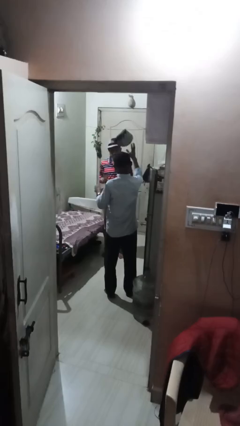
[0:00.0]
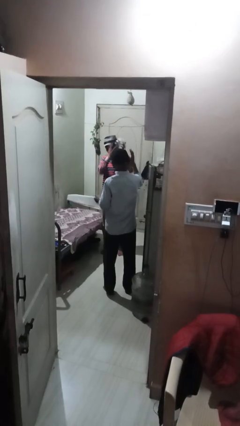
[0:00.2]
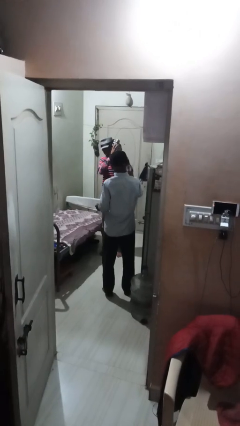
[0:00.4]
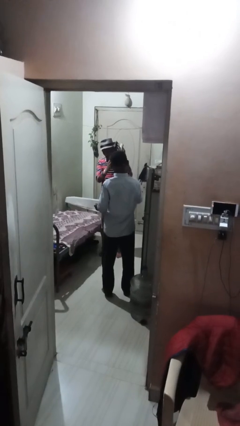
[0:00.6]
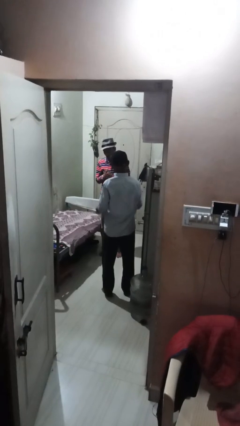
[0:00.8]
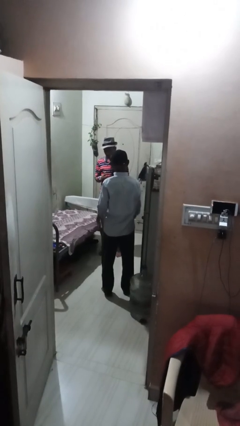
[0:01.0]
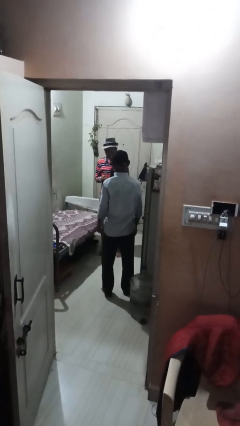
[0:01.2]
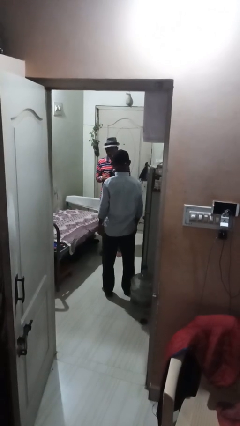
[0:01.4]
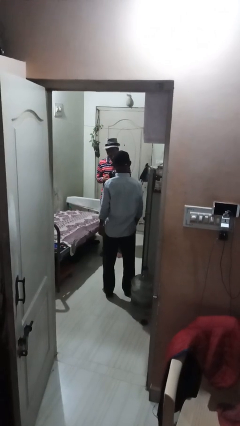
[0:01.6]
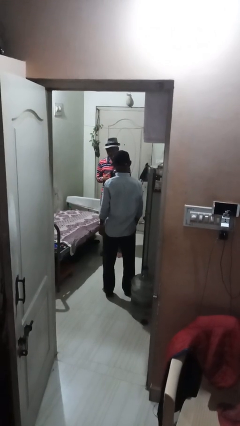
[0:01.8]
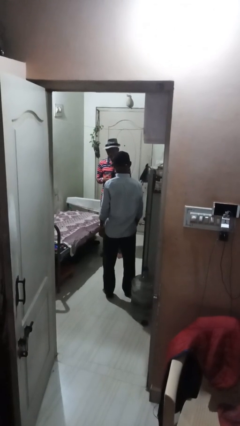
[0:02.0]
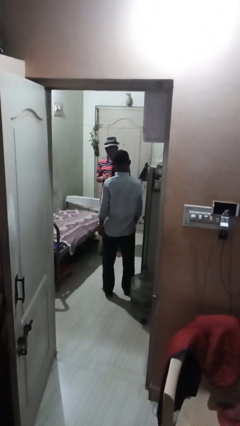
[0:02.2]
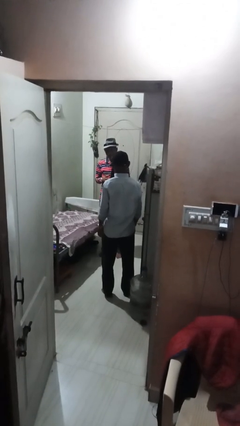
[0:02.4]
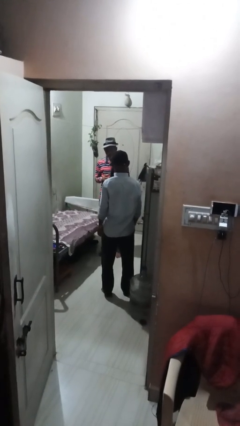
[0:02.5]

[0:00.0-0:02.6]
person throws object to person

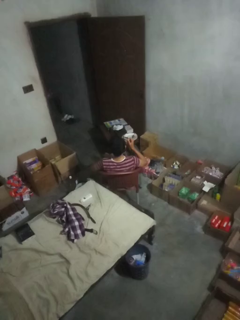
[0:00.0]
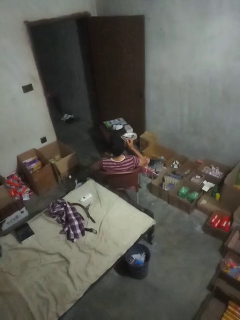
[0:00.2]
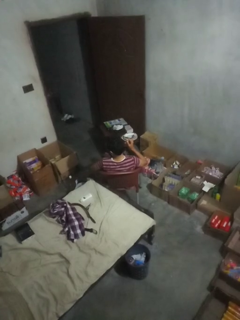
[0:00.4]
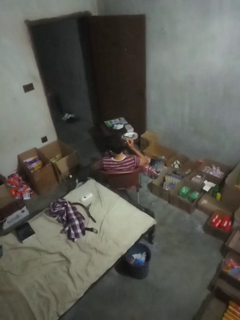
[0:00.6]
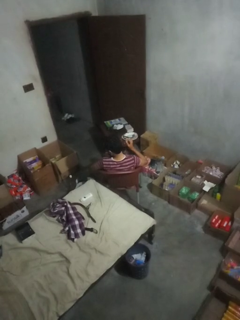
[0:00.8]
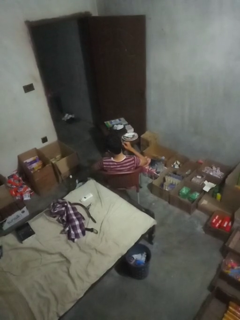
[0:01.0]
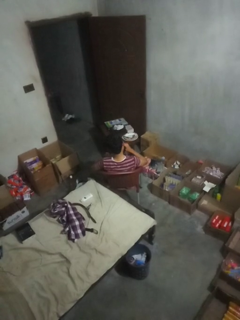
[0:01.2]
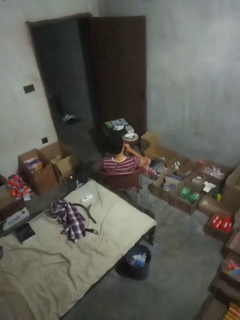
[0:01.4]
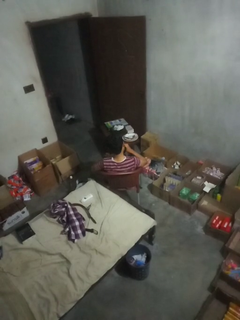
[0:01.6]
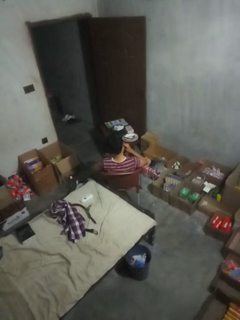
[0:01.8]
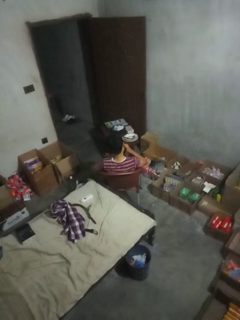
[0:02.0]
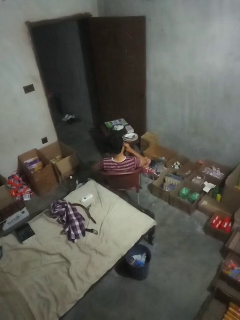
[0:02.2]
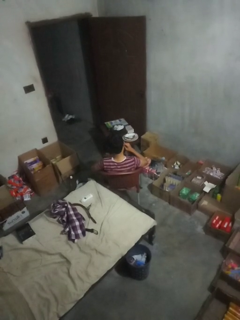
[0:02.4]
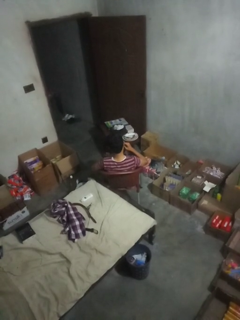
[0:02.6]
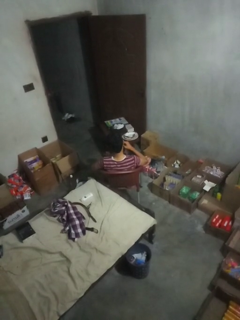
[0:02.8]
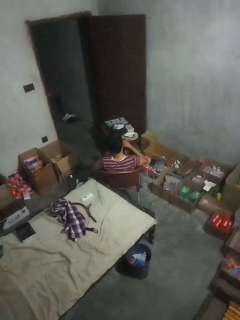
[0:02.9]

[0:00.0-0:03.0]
person flosses

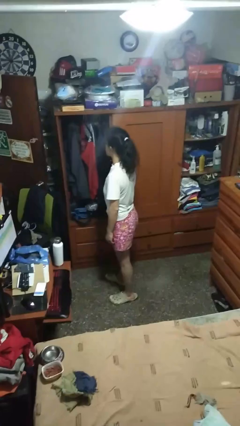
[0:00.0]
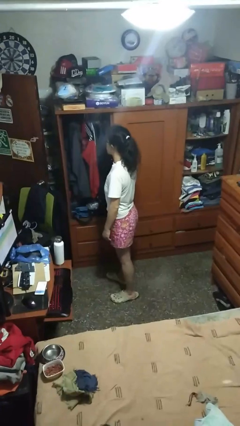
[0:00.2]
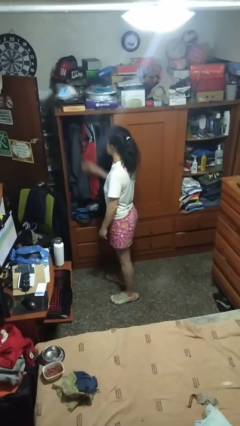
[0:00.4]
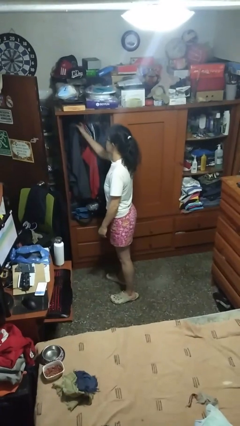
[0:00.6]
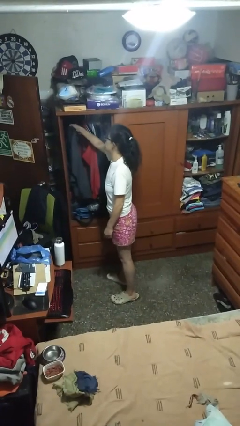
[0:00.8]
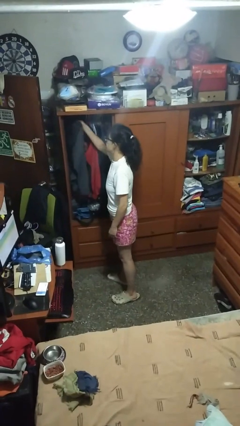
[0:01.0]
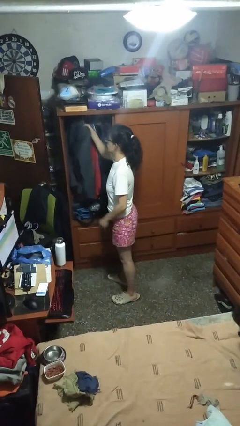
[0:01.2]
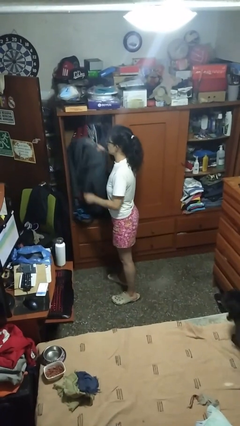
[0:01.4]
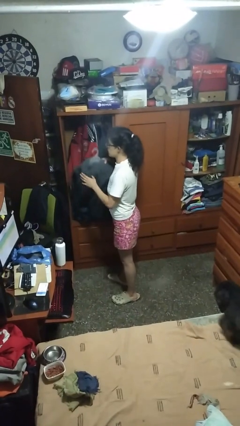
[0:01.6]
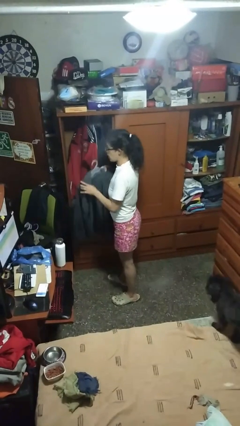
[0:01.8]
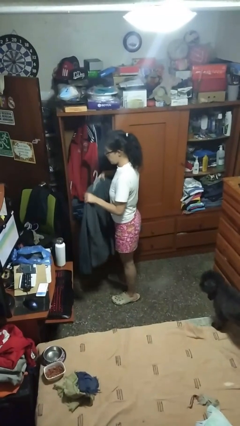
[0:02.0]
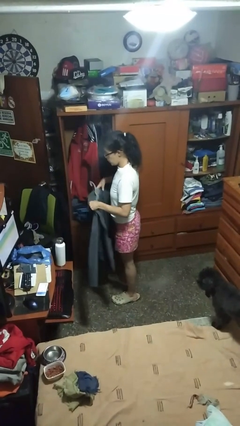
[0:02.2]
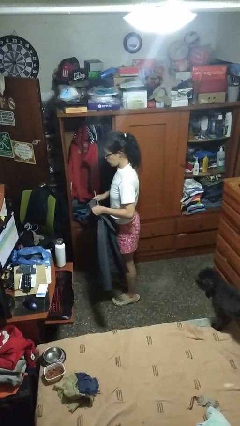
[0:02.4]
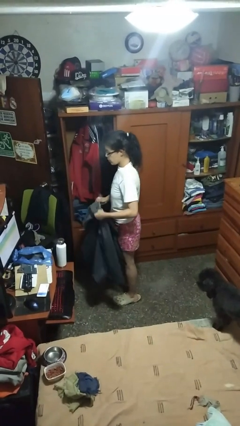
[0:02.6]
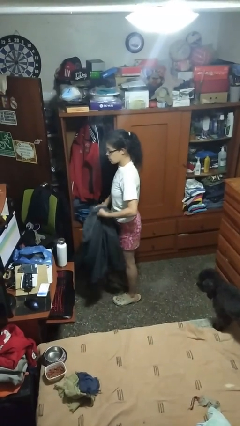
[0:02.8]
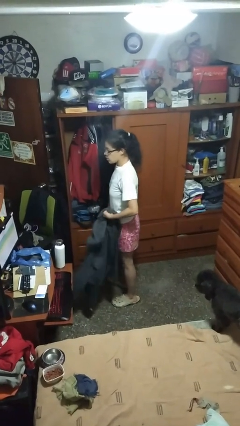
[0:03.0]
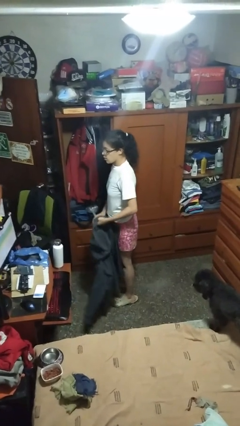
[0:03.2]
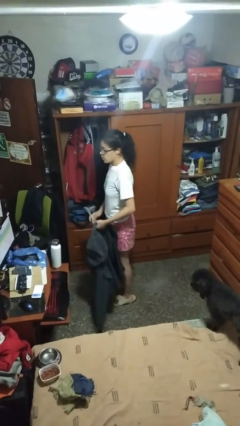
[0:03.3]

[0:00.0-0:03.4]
person takes clothes from closet

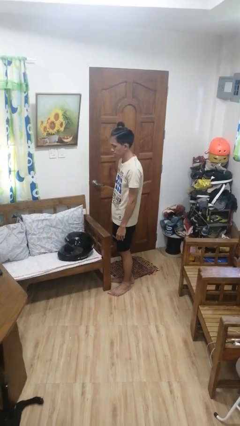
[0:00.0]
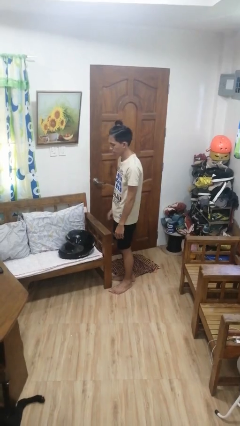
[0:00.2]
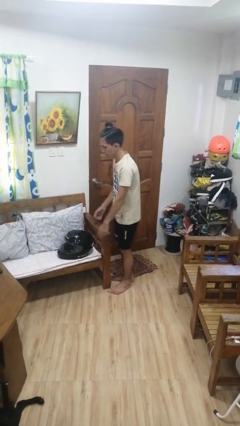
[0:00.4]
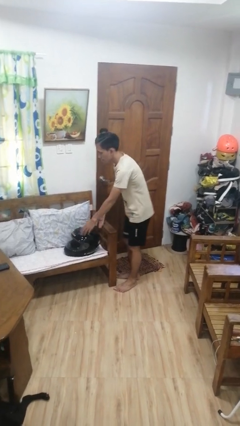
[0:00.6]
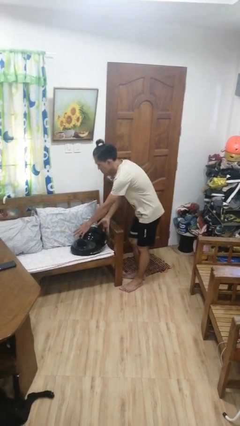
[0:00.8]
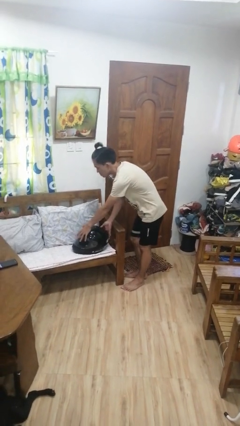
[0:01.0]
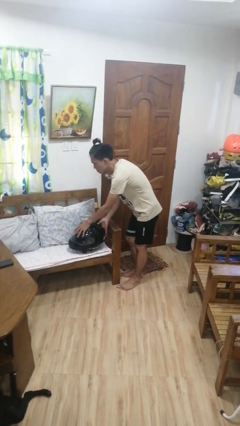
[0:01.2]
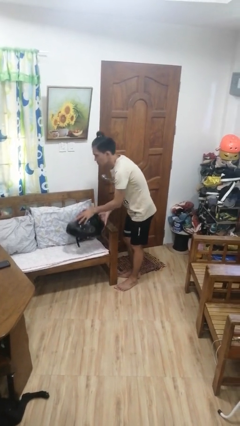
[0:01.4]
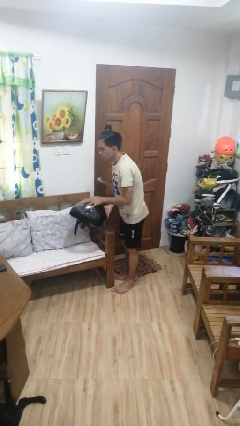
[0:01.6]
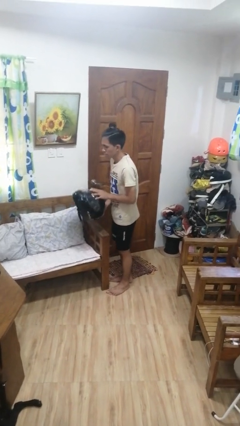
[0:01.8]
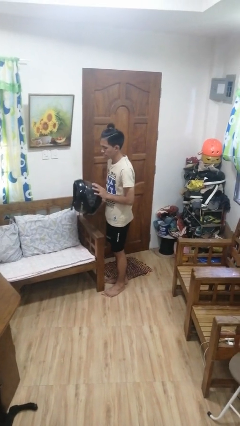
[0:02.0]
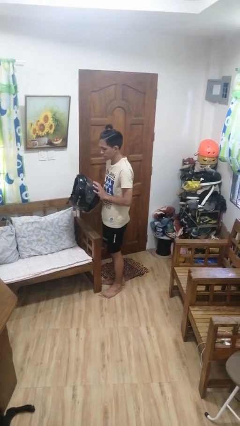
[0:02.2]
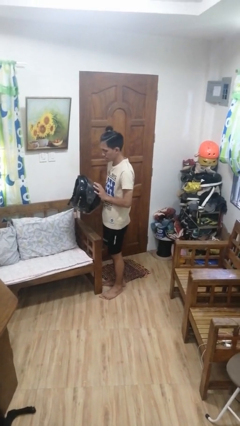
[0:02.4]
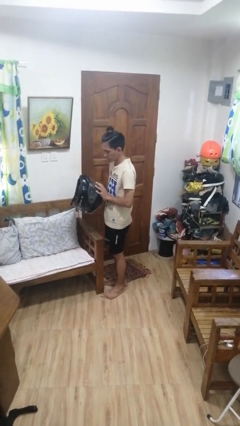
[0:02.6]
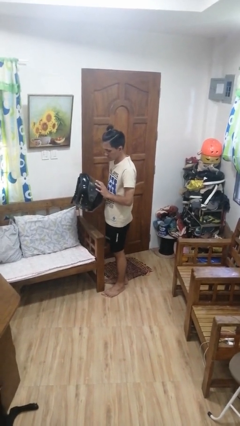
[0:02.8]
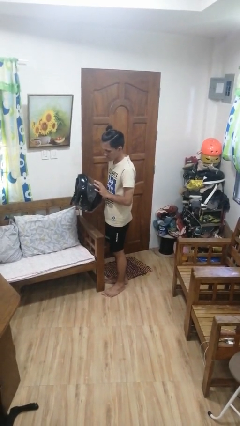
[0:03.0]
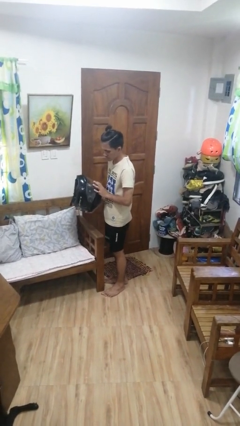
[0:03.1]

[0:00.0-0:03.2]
person picks up object from couch

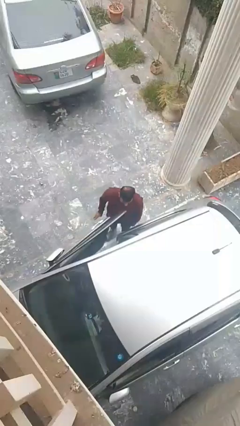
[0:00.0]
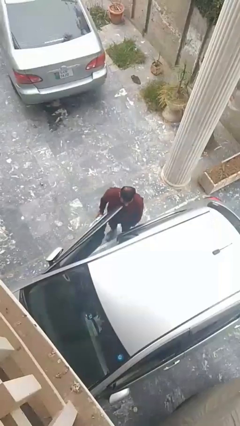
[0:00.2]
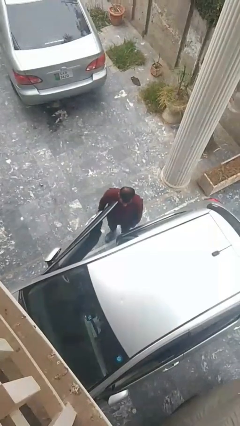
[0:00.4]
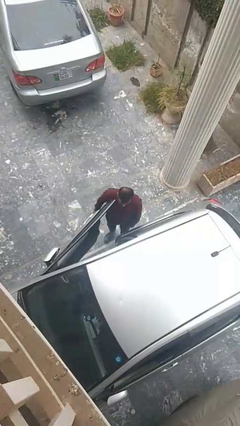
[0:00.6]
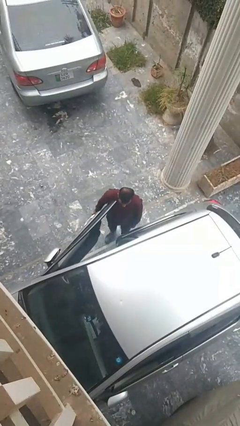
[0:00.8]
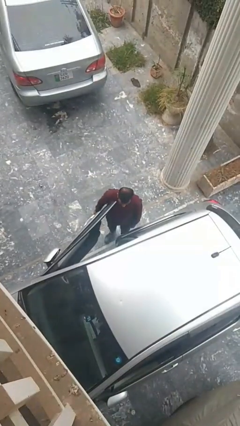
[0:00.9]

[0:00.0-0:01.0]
person opens car door

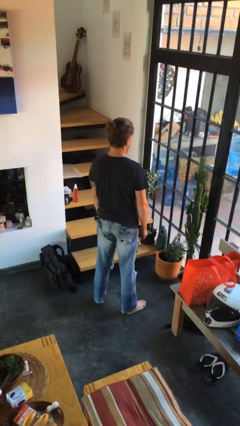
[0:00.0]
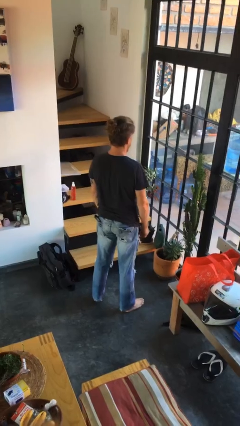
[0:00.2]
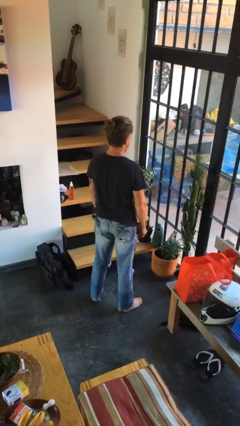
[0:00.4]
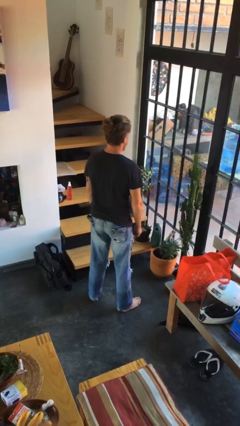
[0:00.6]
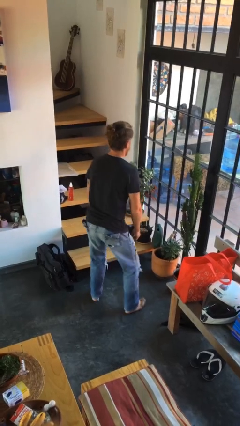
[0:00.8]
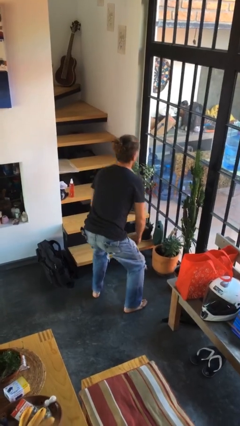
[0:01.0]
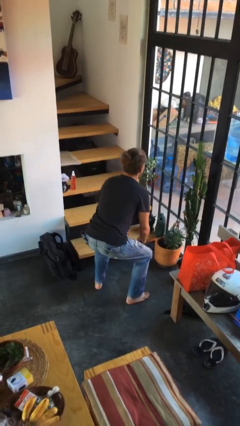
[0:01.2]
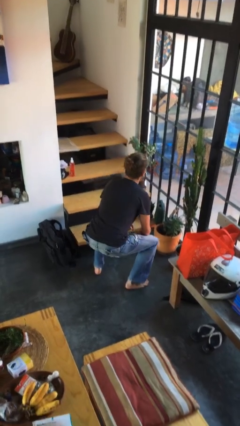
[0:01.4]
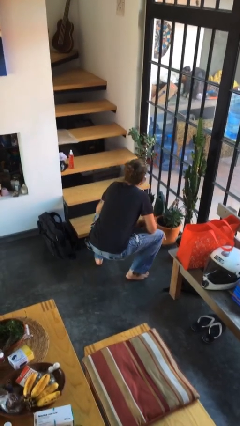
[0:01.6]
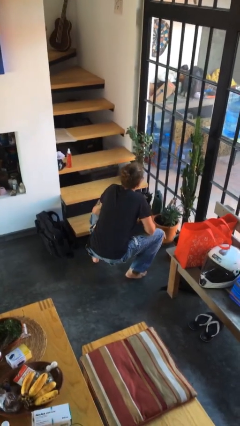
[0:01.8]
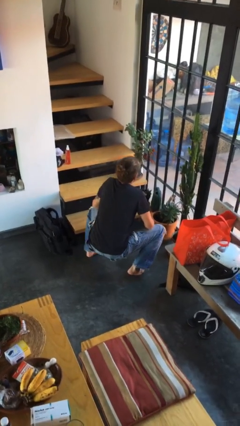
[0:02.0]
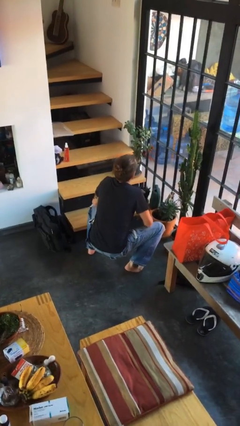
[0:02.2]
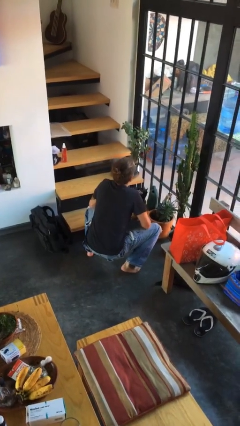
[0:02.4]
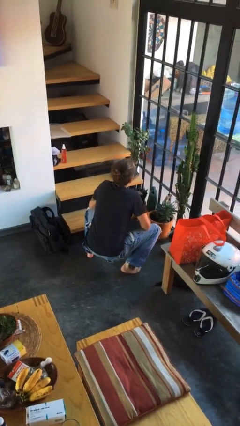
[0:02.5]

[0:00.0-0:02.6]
person squats

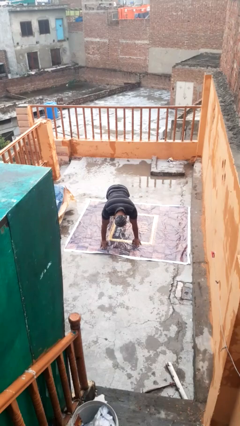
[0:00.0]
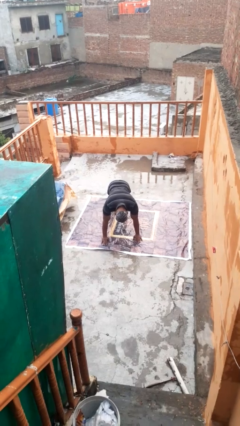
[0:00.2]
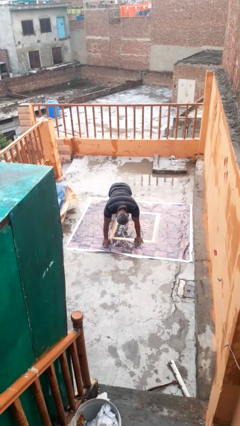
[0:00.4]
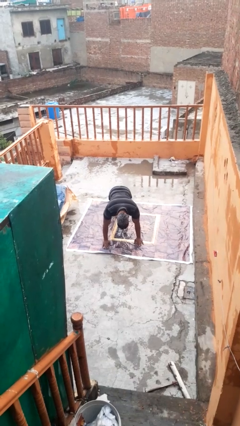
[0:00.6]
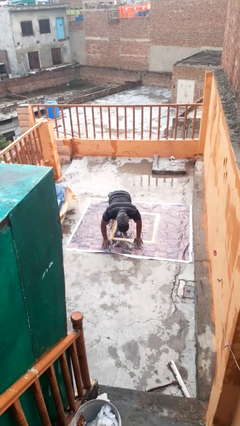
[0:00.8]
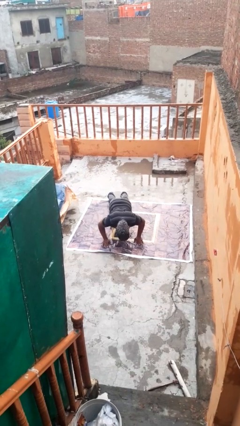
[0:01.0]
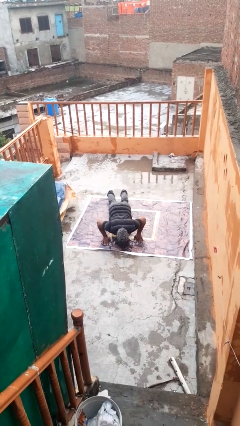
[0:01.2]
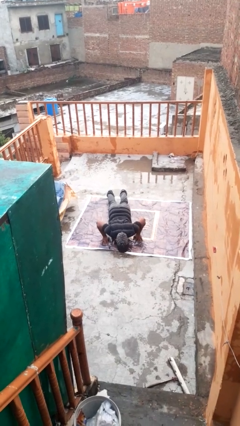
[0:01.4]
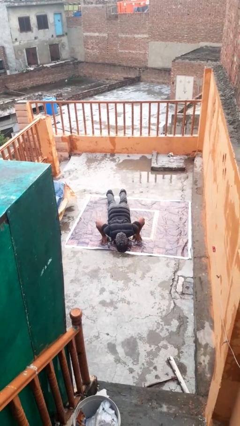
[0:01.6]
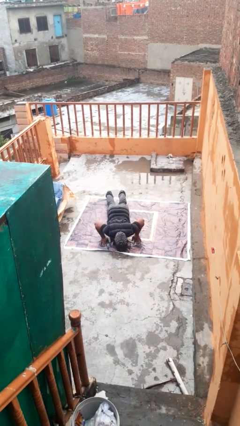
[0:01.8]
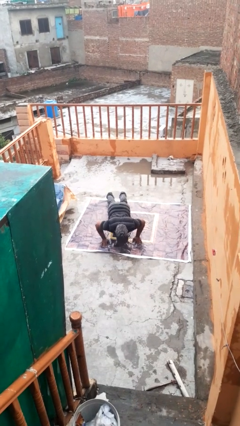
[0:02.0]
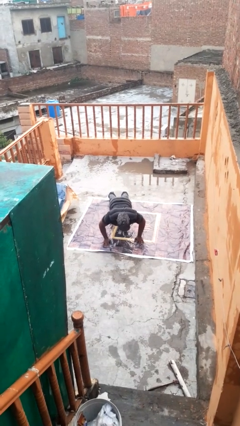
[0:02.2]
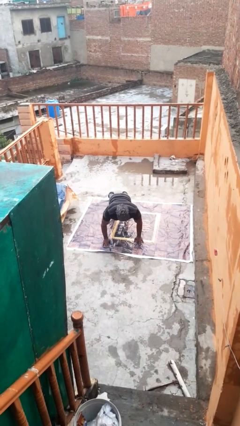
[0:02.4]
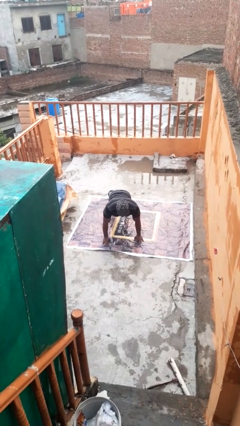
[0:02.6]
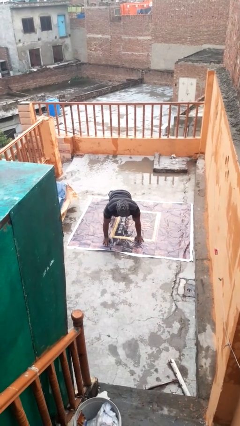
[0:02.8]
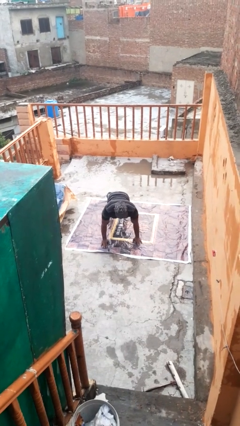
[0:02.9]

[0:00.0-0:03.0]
person exercises with pushup
